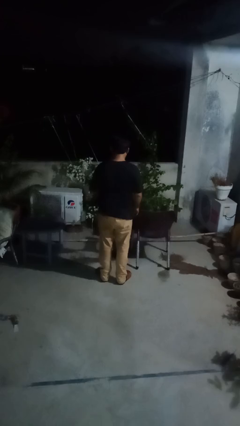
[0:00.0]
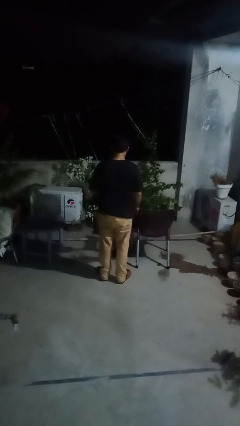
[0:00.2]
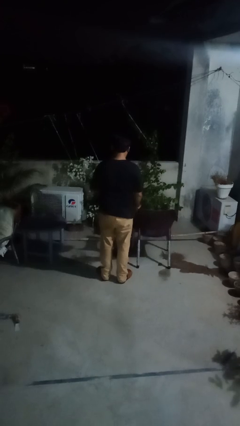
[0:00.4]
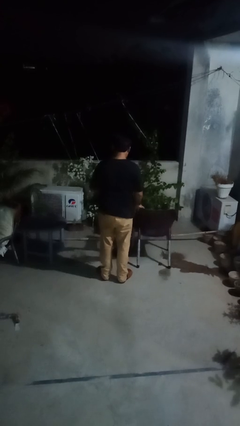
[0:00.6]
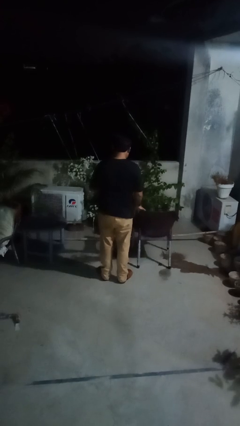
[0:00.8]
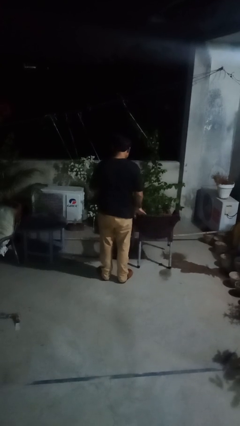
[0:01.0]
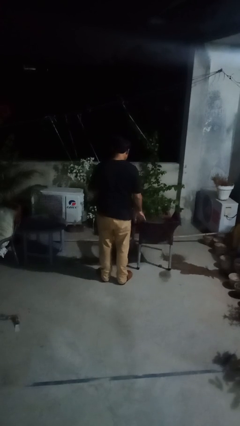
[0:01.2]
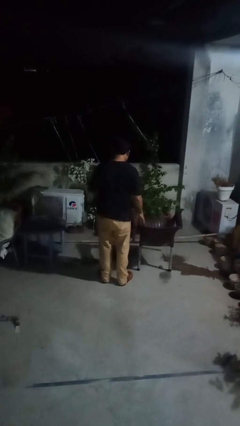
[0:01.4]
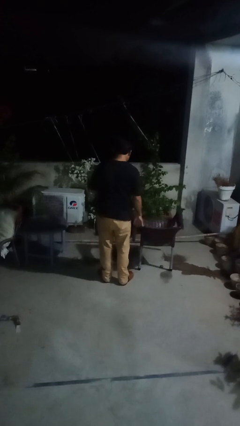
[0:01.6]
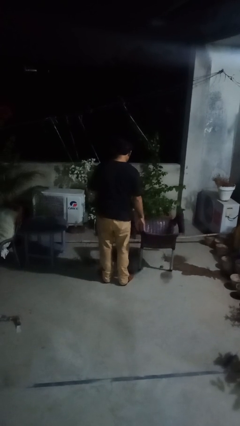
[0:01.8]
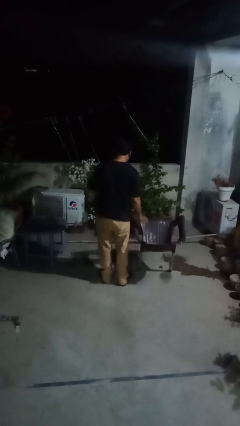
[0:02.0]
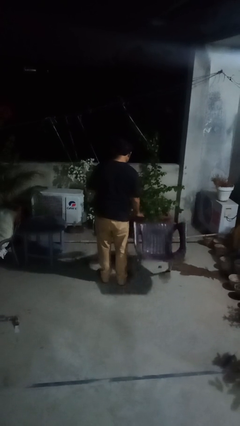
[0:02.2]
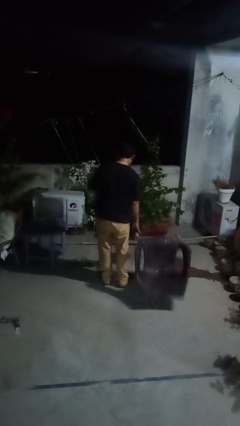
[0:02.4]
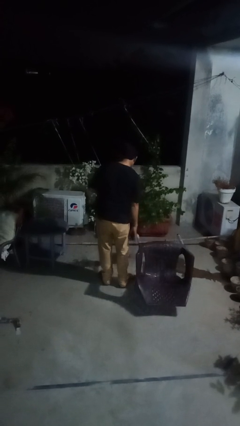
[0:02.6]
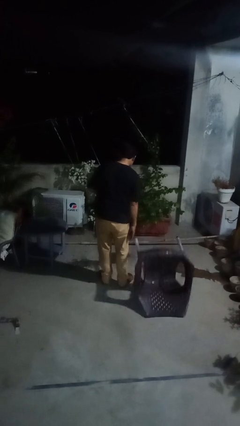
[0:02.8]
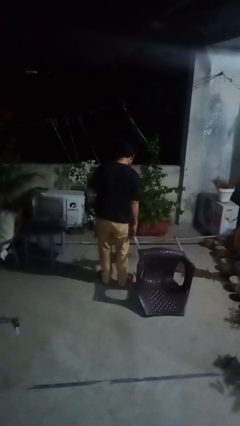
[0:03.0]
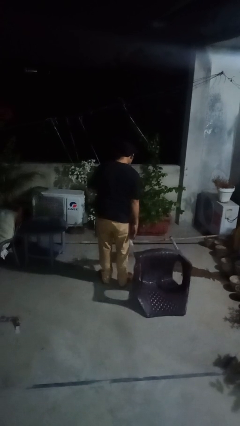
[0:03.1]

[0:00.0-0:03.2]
person knocks over furniture

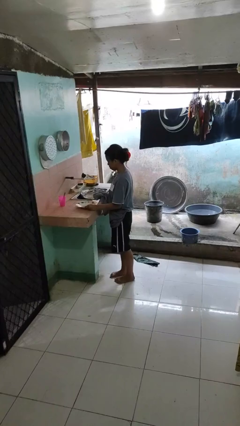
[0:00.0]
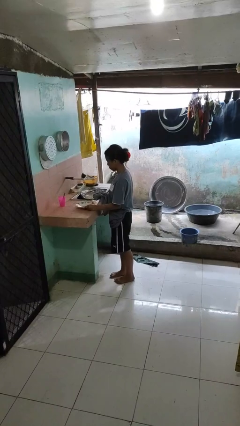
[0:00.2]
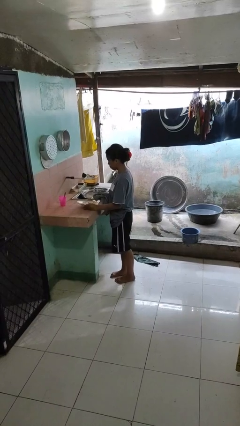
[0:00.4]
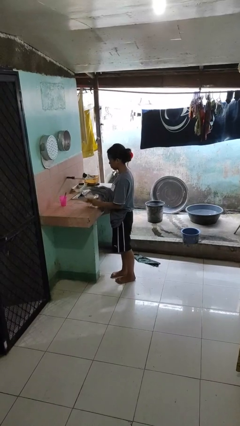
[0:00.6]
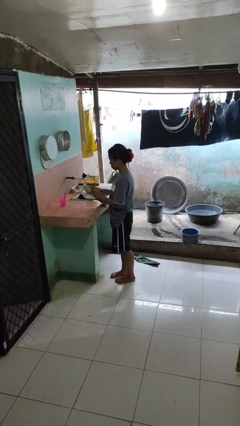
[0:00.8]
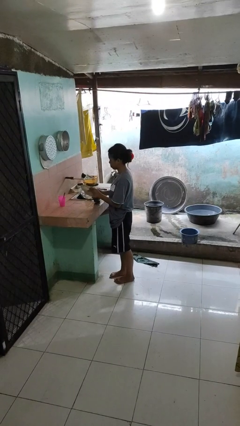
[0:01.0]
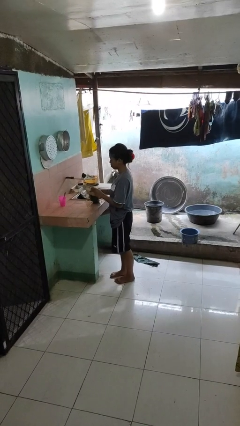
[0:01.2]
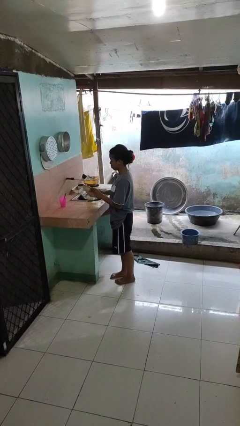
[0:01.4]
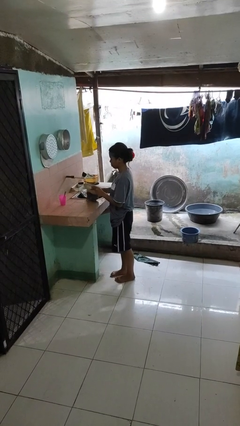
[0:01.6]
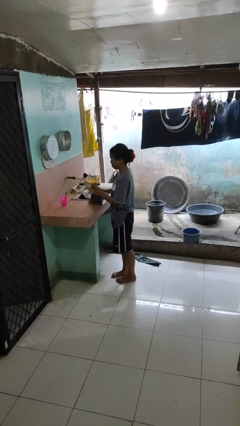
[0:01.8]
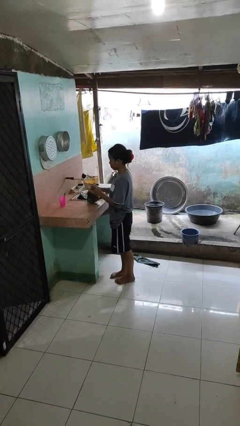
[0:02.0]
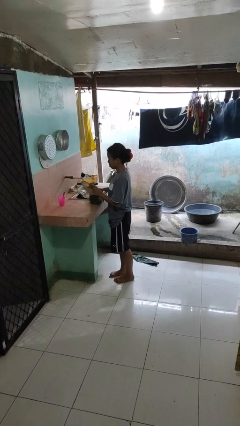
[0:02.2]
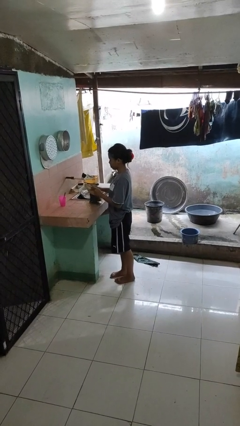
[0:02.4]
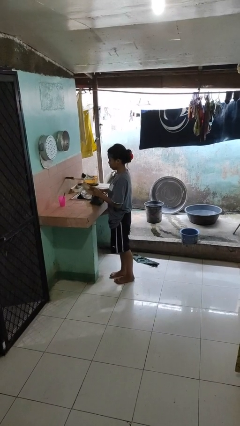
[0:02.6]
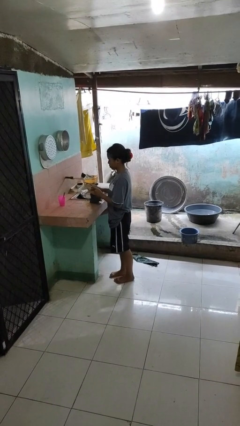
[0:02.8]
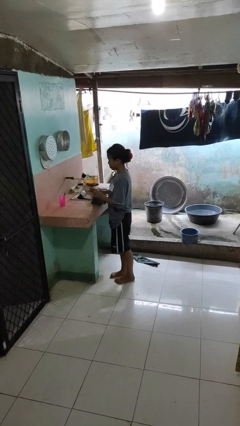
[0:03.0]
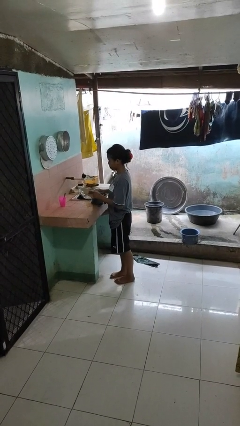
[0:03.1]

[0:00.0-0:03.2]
person dries dish

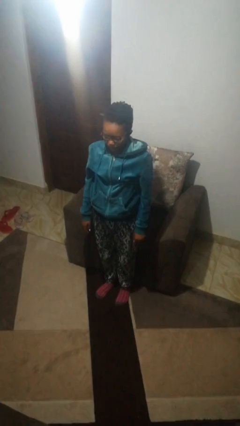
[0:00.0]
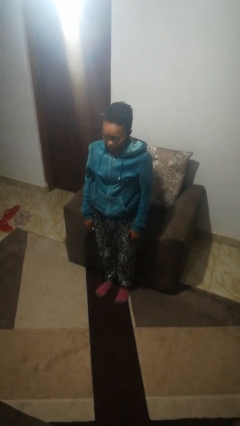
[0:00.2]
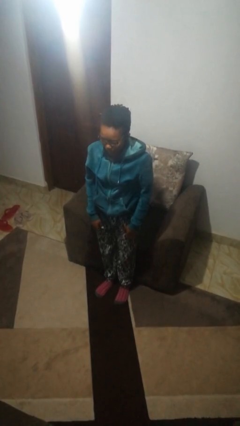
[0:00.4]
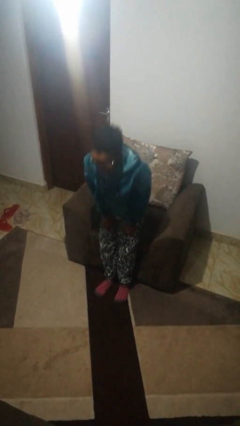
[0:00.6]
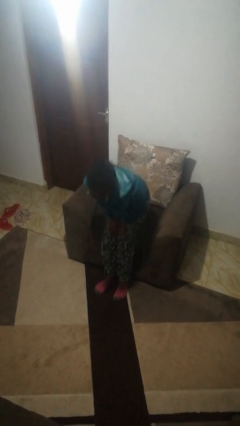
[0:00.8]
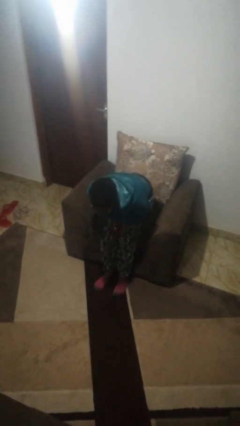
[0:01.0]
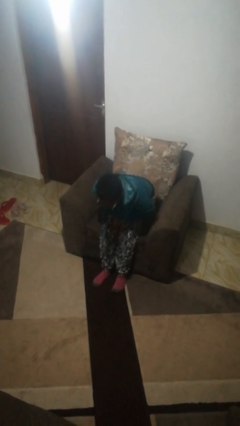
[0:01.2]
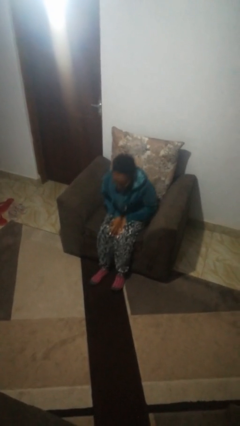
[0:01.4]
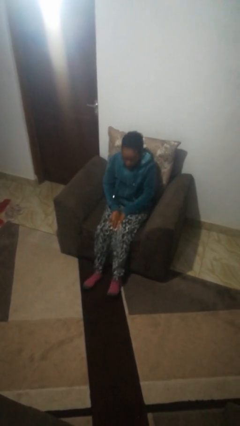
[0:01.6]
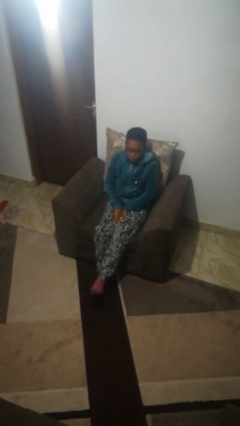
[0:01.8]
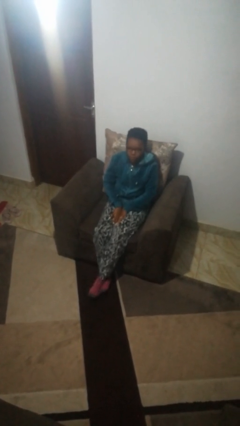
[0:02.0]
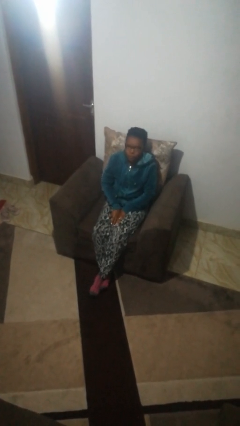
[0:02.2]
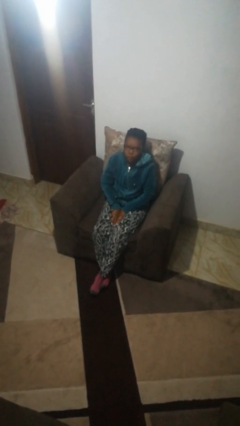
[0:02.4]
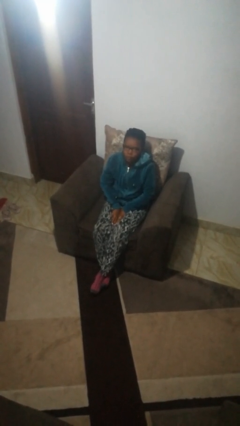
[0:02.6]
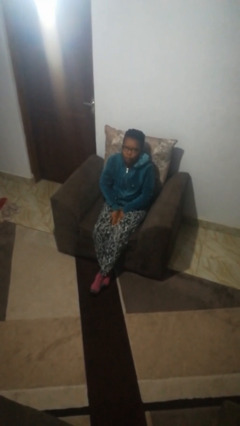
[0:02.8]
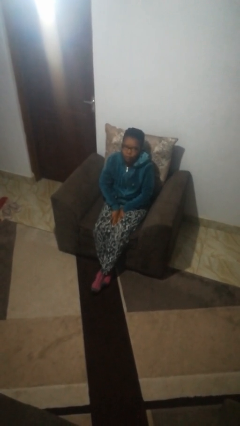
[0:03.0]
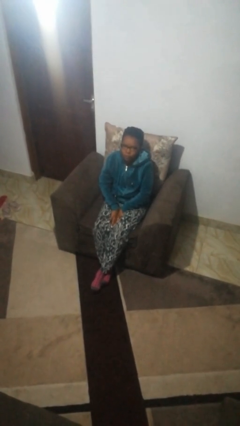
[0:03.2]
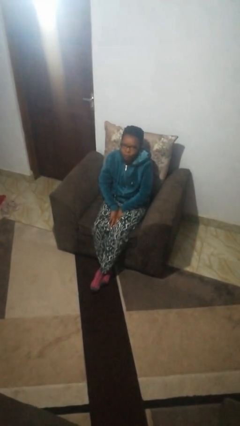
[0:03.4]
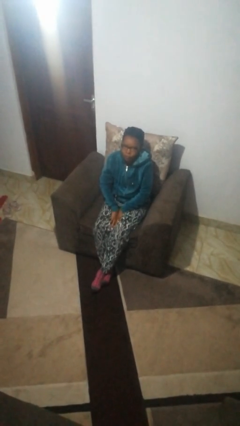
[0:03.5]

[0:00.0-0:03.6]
person sits down

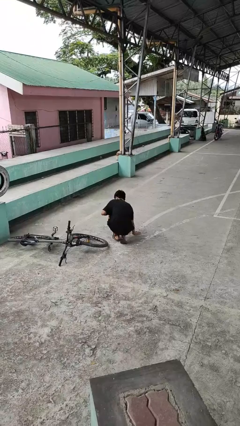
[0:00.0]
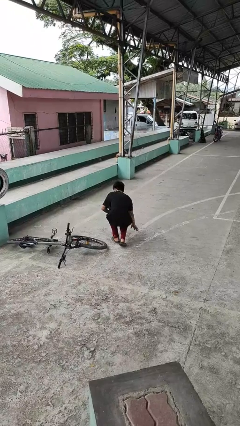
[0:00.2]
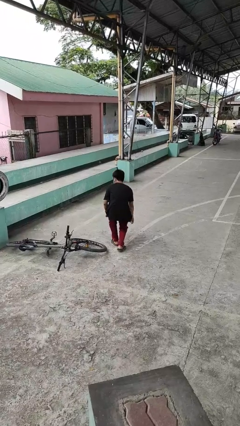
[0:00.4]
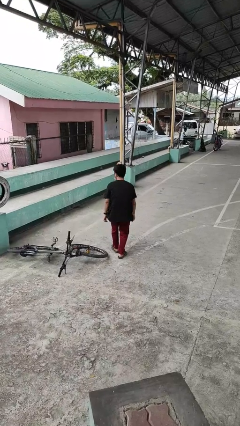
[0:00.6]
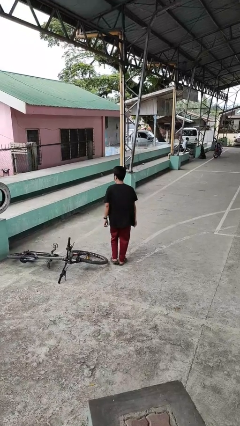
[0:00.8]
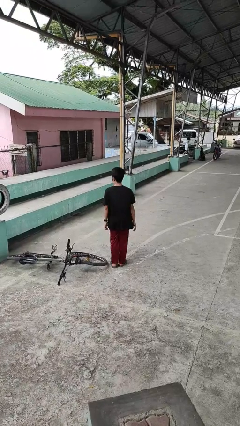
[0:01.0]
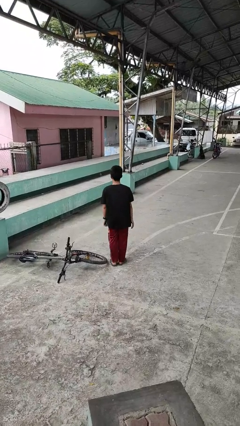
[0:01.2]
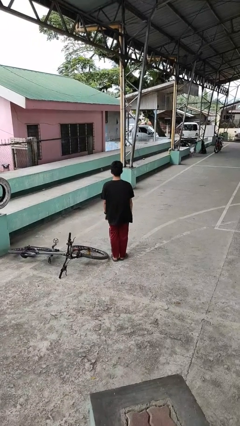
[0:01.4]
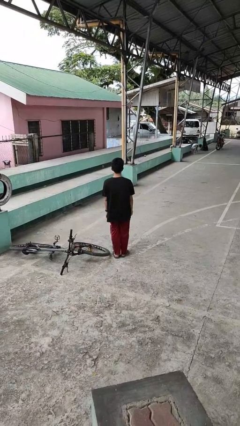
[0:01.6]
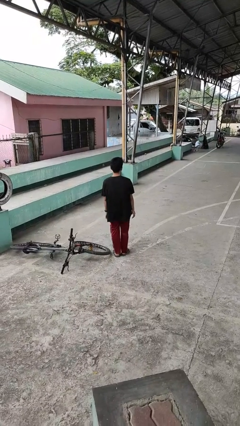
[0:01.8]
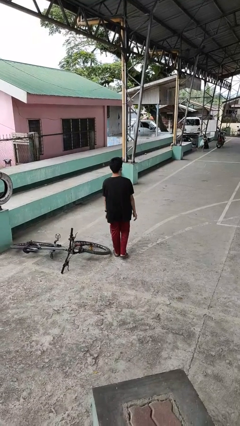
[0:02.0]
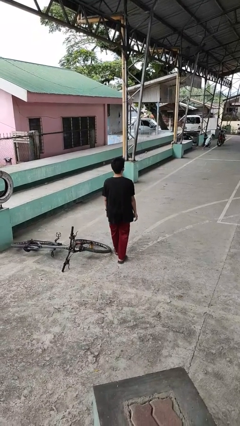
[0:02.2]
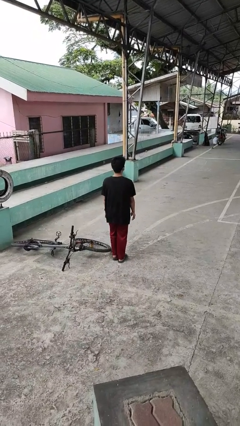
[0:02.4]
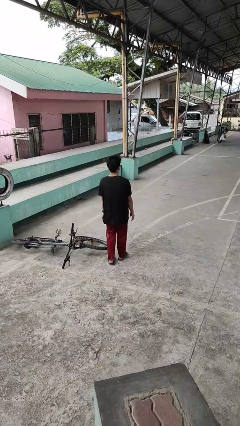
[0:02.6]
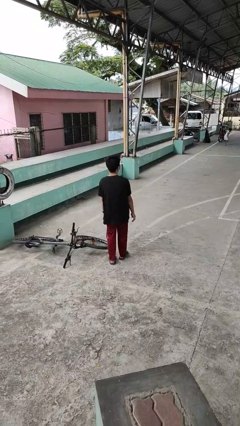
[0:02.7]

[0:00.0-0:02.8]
person stands up from floor

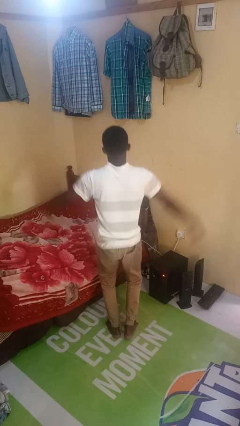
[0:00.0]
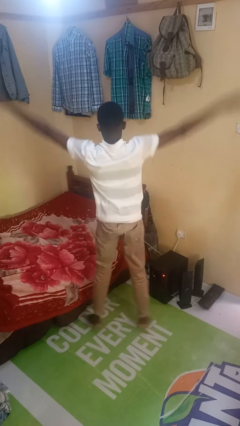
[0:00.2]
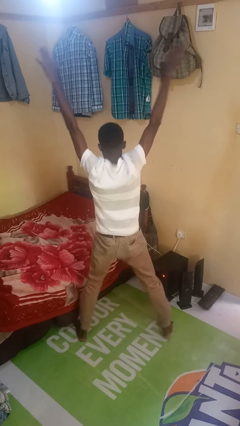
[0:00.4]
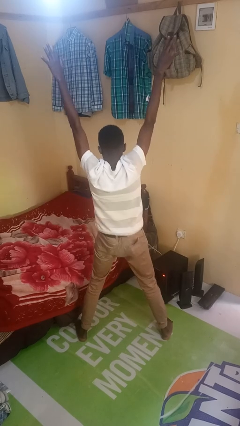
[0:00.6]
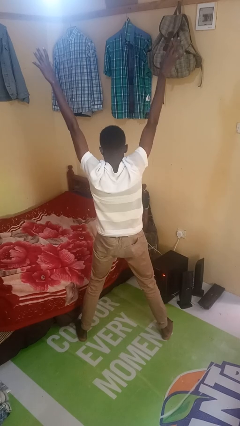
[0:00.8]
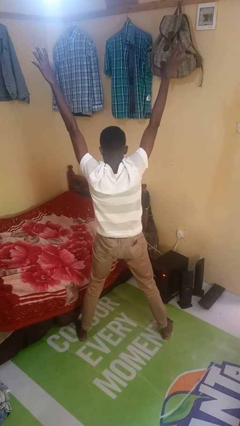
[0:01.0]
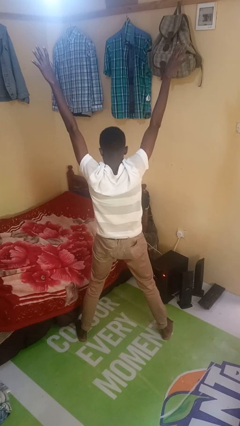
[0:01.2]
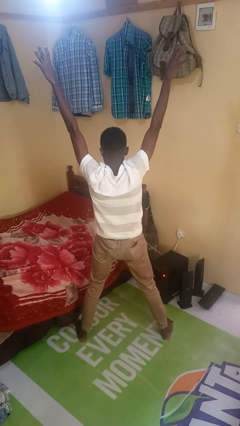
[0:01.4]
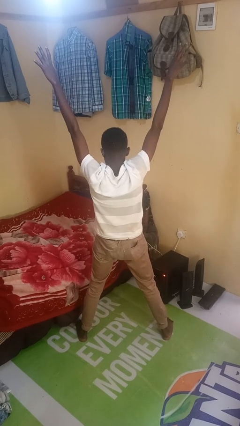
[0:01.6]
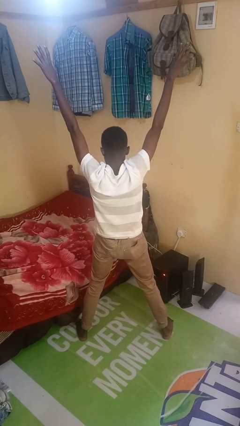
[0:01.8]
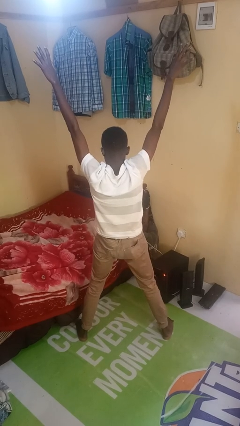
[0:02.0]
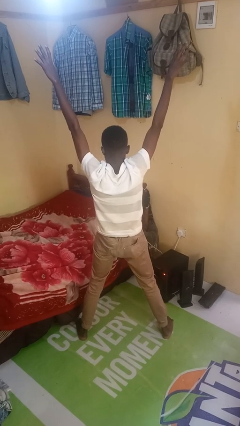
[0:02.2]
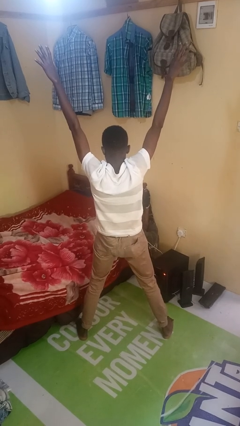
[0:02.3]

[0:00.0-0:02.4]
person exercises with jumping jacks

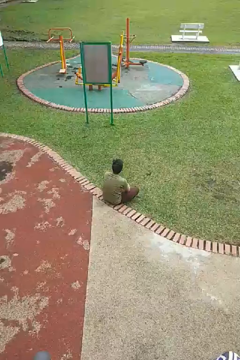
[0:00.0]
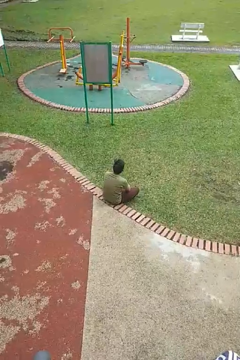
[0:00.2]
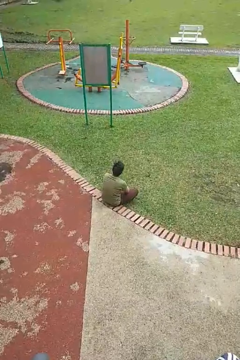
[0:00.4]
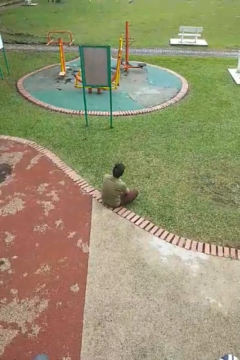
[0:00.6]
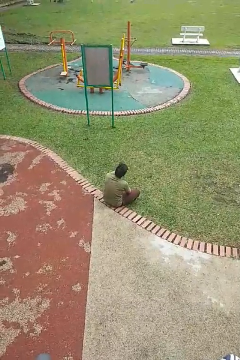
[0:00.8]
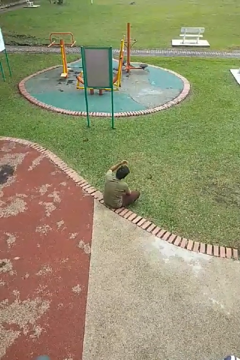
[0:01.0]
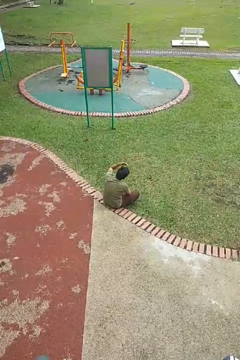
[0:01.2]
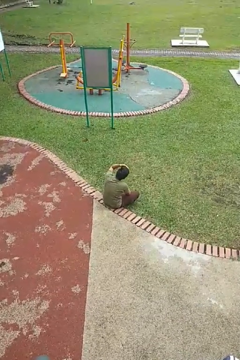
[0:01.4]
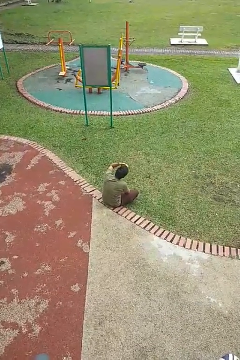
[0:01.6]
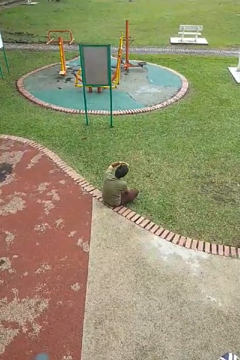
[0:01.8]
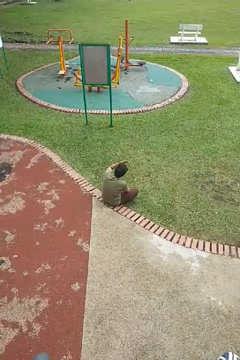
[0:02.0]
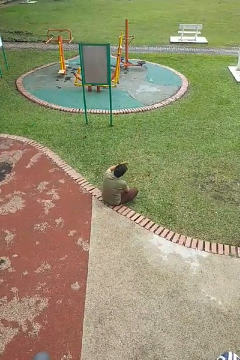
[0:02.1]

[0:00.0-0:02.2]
person shades eyes
